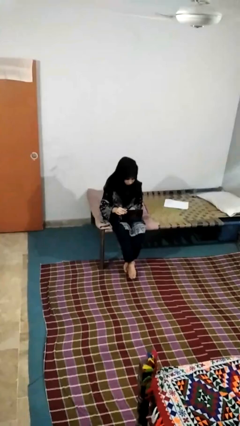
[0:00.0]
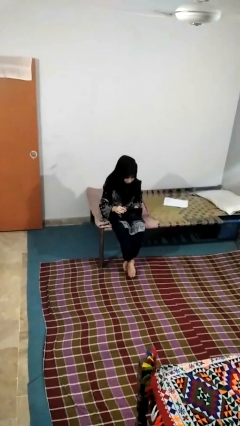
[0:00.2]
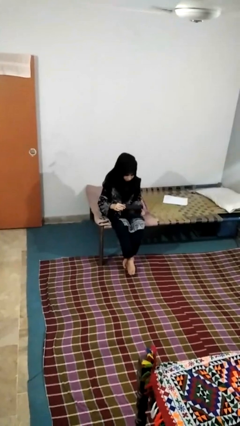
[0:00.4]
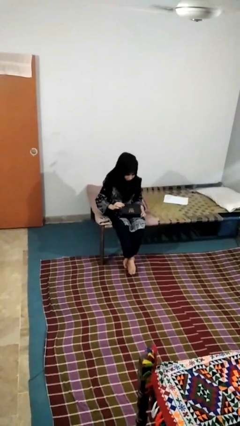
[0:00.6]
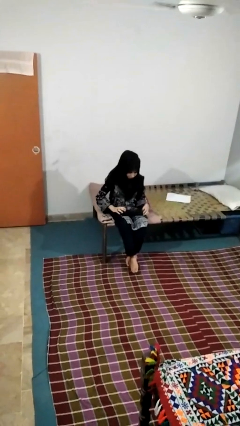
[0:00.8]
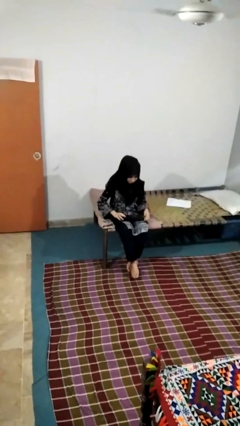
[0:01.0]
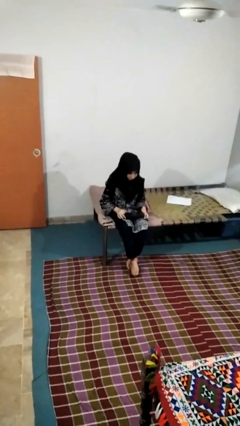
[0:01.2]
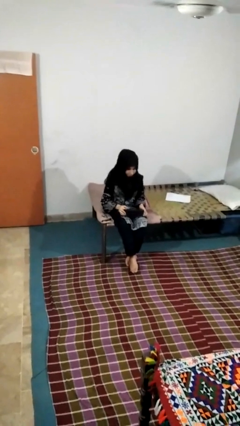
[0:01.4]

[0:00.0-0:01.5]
person closes jewelry box

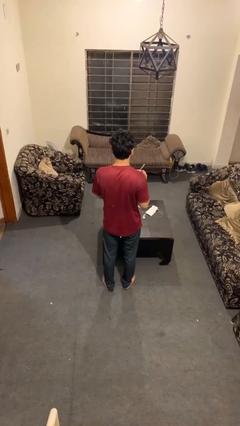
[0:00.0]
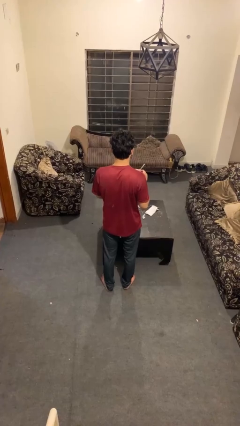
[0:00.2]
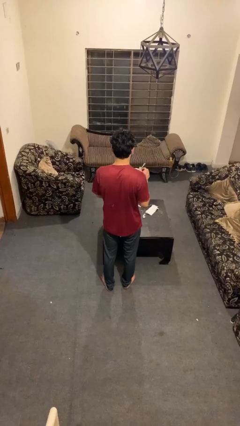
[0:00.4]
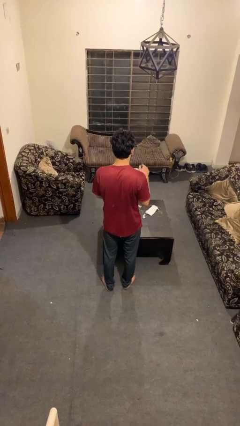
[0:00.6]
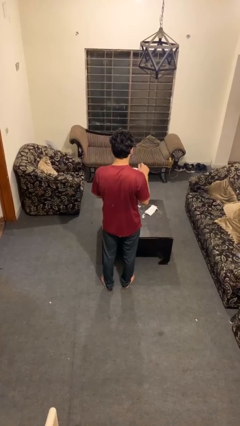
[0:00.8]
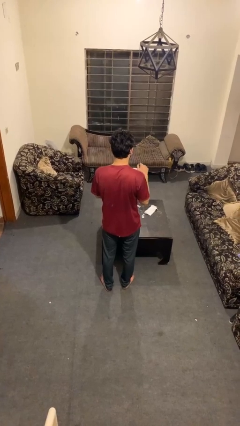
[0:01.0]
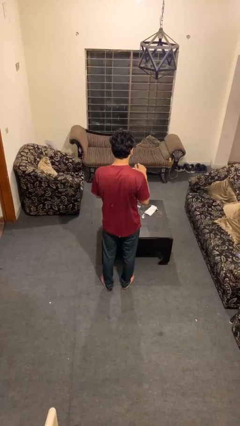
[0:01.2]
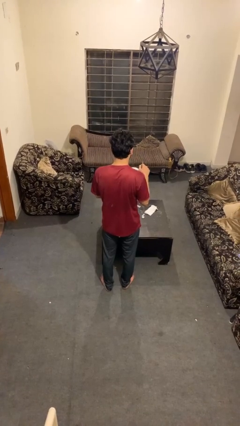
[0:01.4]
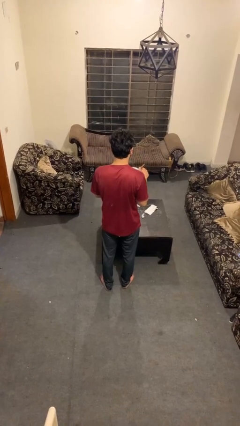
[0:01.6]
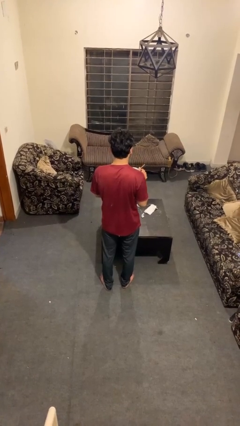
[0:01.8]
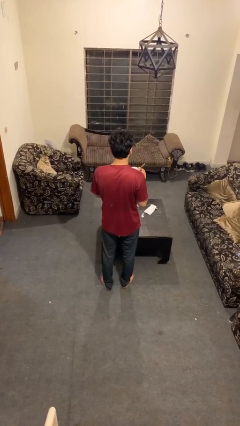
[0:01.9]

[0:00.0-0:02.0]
person stirs mug

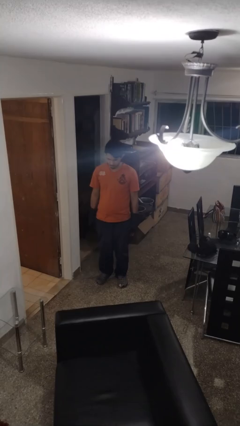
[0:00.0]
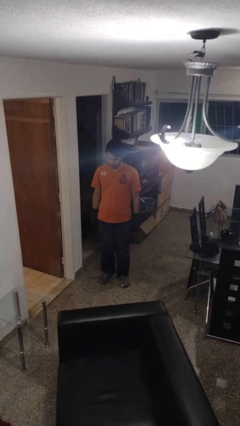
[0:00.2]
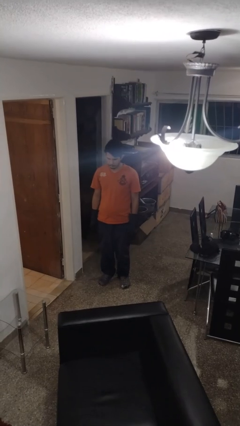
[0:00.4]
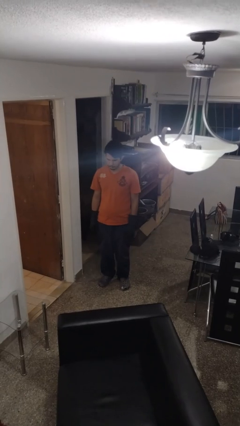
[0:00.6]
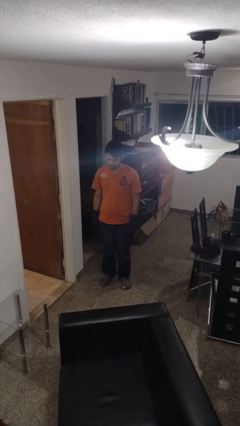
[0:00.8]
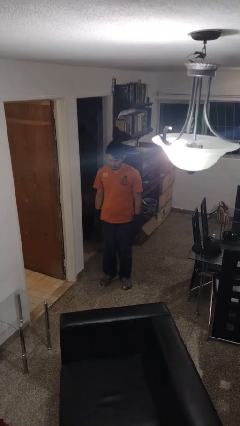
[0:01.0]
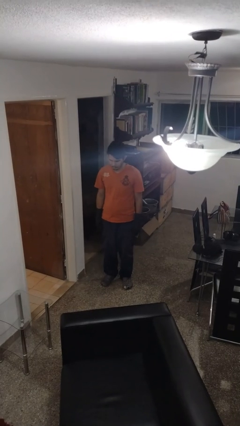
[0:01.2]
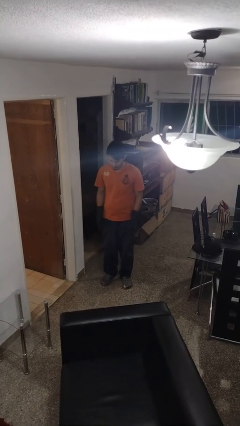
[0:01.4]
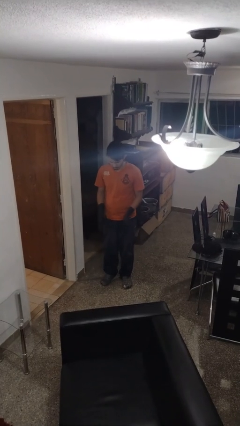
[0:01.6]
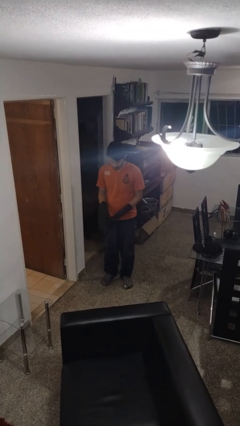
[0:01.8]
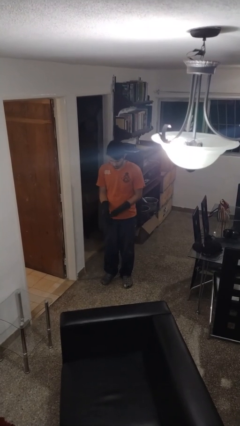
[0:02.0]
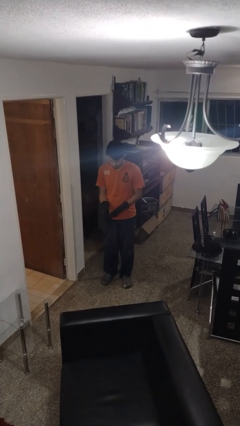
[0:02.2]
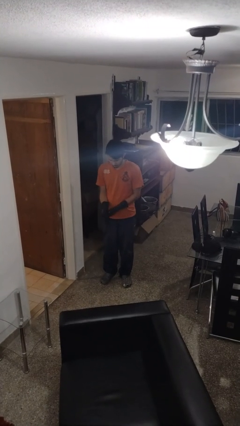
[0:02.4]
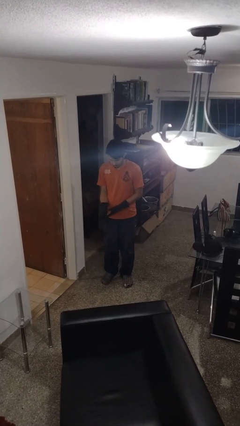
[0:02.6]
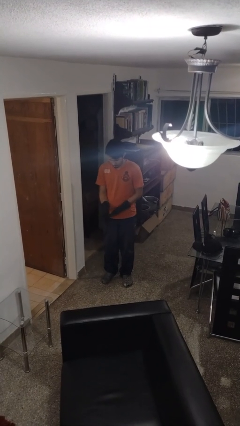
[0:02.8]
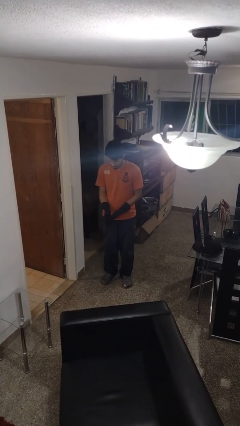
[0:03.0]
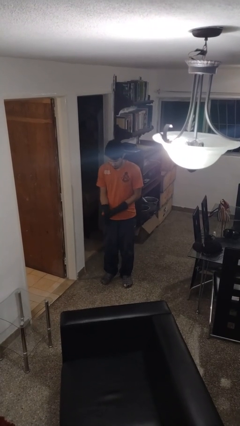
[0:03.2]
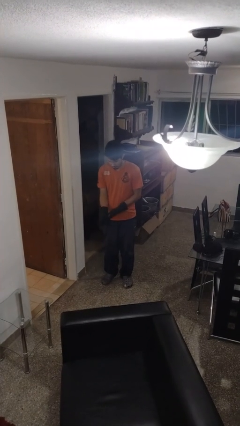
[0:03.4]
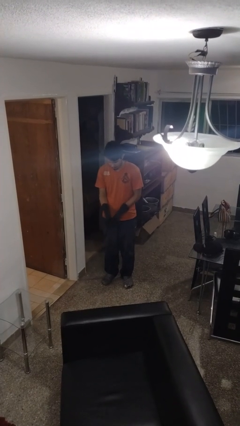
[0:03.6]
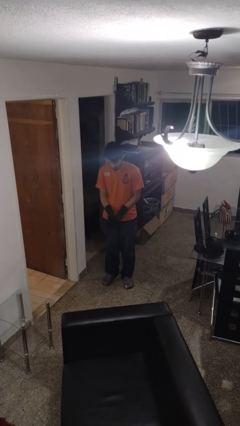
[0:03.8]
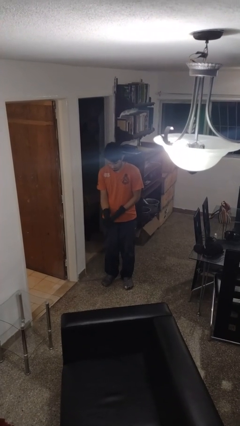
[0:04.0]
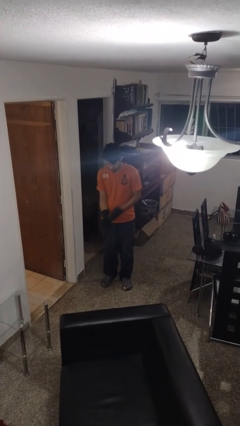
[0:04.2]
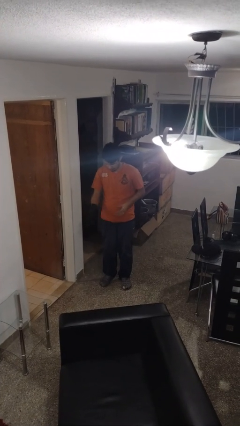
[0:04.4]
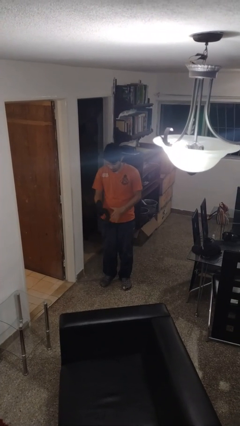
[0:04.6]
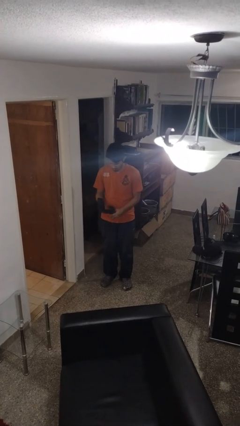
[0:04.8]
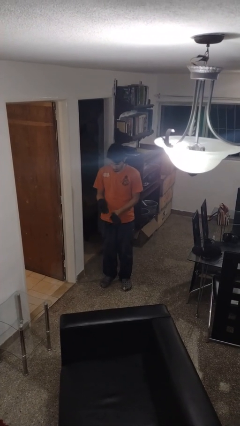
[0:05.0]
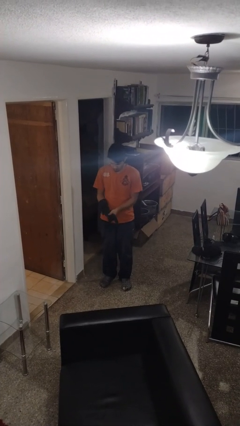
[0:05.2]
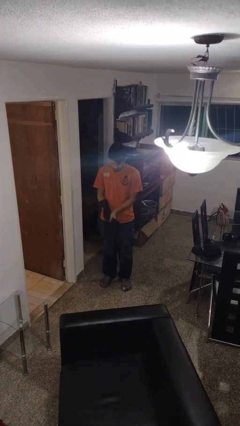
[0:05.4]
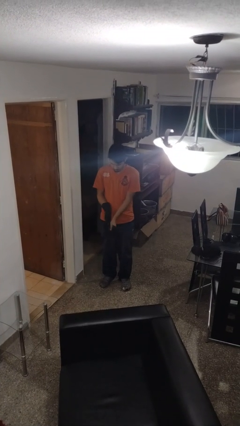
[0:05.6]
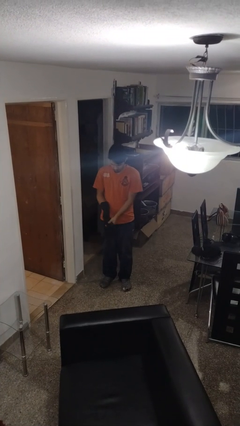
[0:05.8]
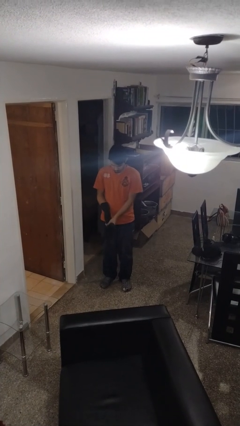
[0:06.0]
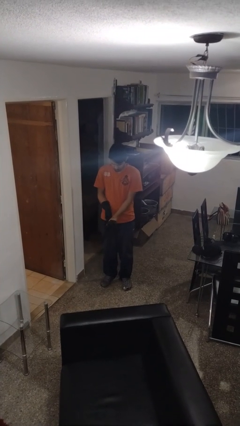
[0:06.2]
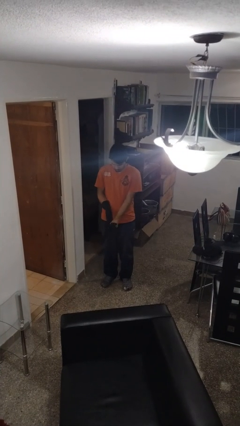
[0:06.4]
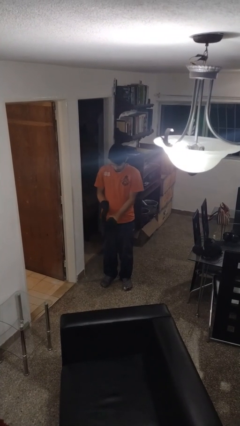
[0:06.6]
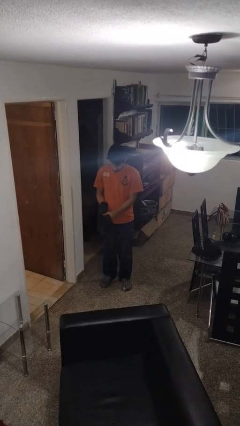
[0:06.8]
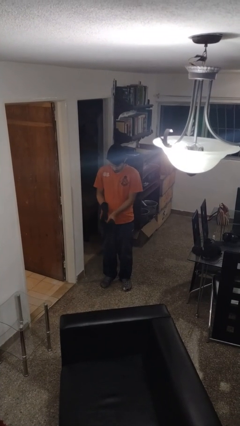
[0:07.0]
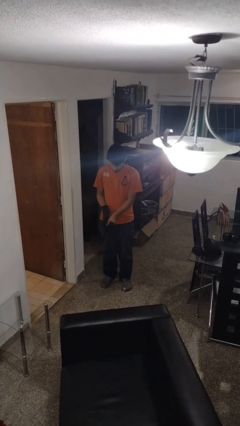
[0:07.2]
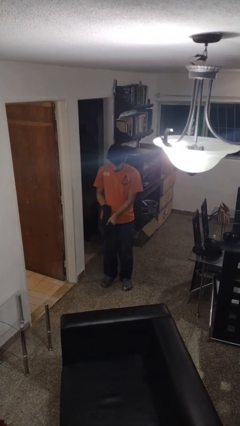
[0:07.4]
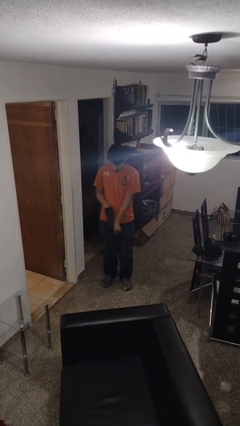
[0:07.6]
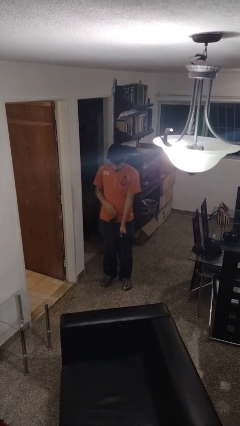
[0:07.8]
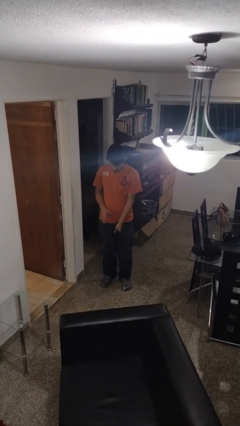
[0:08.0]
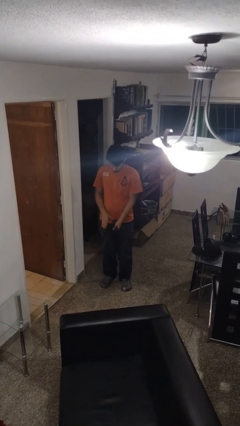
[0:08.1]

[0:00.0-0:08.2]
person takes off gloves

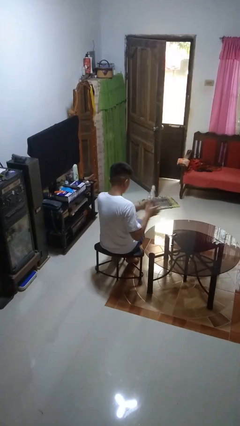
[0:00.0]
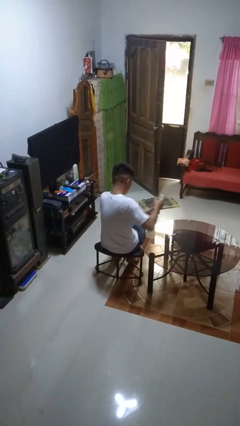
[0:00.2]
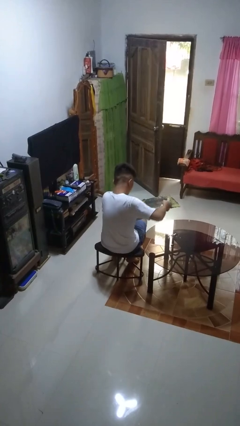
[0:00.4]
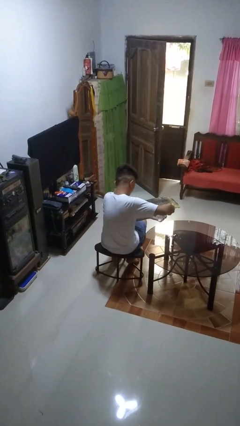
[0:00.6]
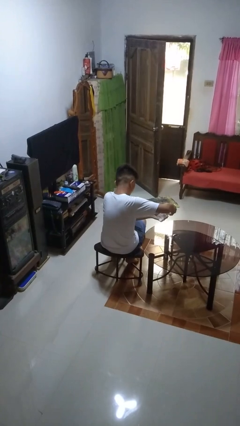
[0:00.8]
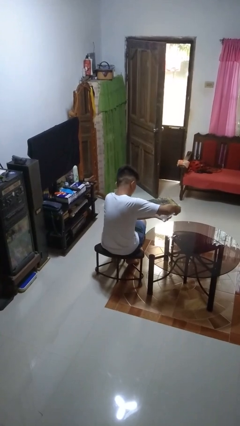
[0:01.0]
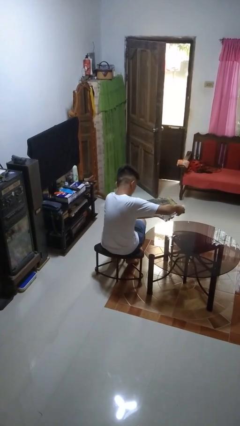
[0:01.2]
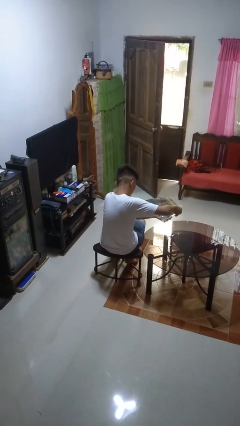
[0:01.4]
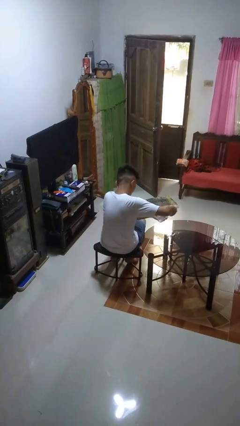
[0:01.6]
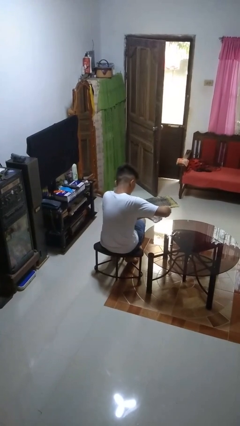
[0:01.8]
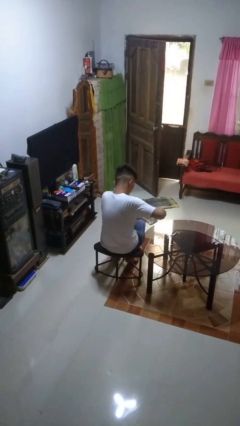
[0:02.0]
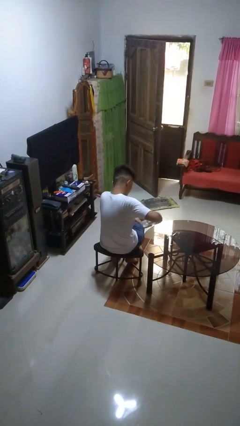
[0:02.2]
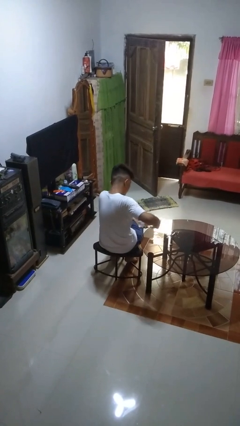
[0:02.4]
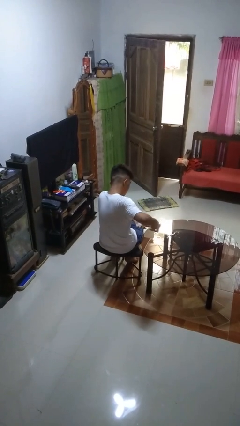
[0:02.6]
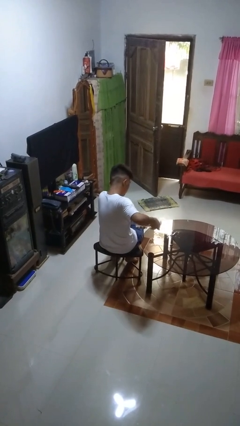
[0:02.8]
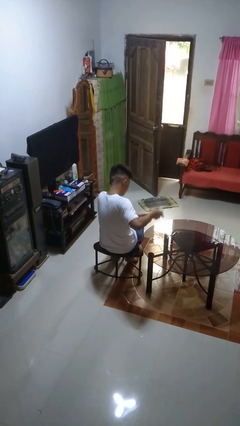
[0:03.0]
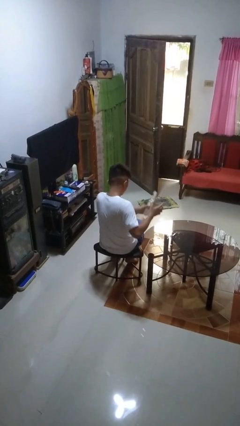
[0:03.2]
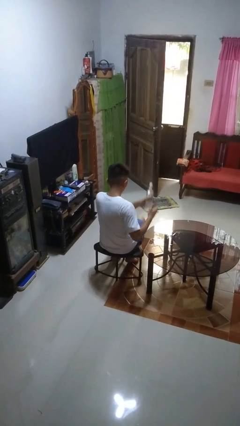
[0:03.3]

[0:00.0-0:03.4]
person sprays from bottle

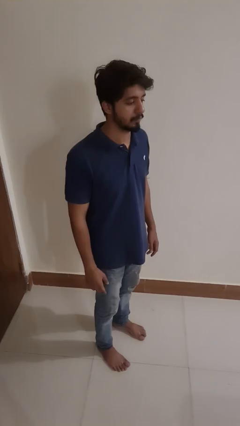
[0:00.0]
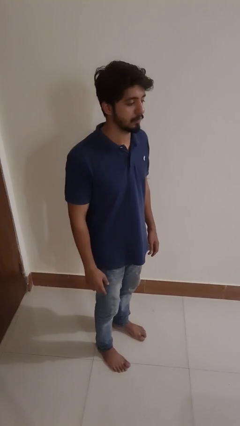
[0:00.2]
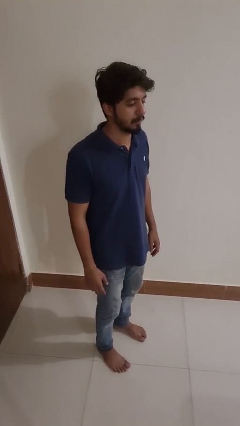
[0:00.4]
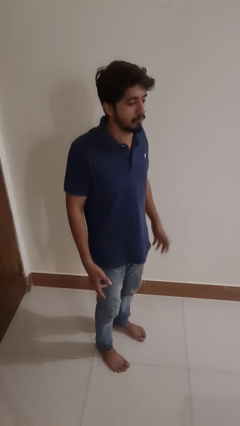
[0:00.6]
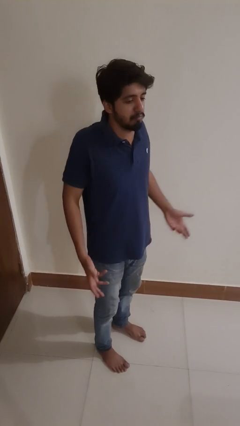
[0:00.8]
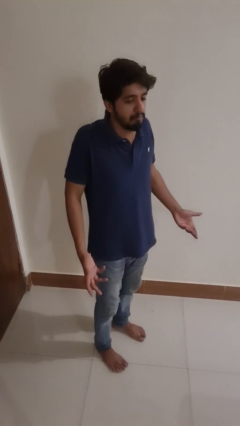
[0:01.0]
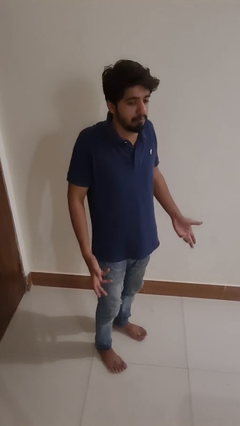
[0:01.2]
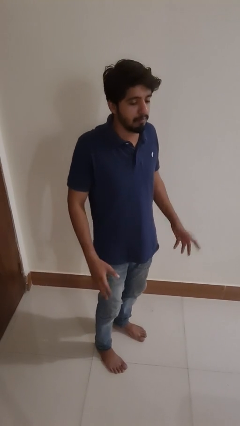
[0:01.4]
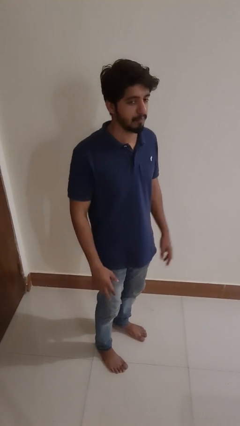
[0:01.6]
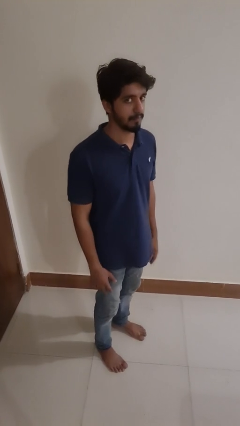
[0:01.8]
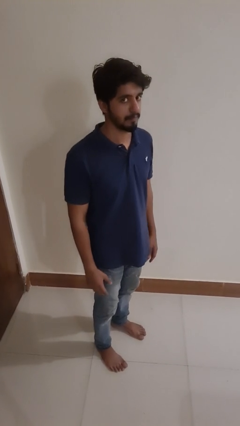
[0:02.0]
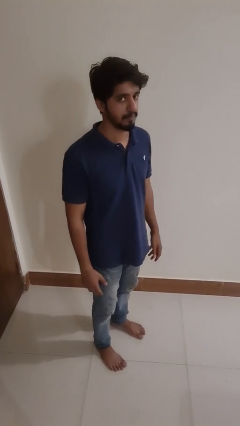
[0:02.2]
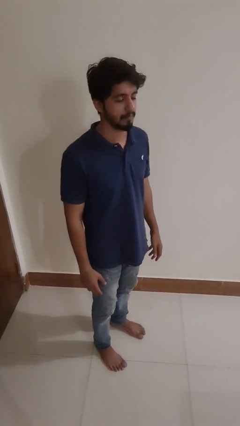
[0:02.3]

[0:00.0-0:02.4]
person shrugs

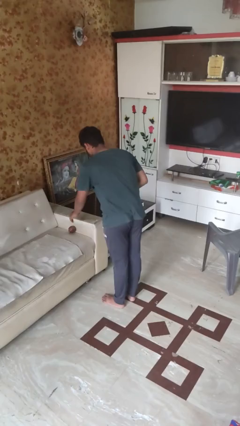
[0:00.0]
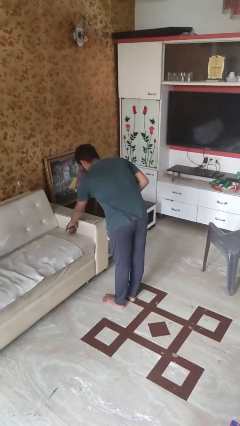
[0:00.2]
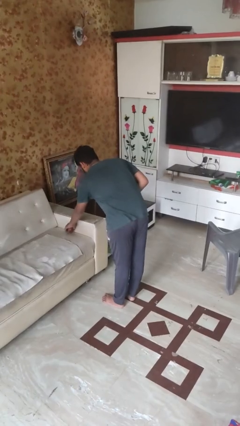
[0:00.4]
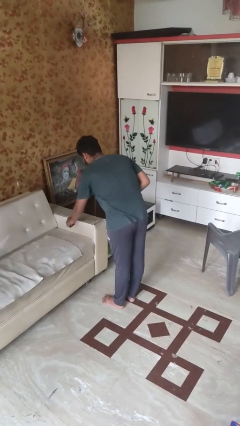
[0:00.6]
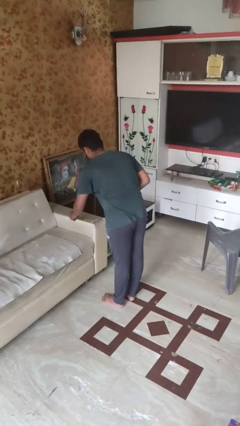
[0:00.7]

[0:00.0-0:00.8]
person picks up object from bed
